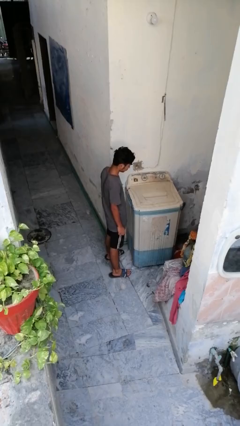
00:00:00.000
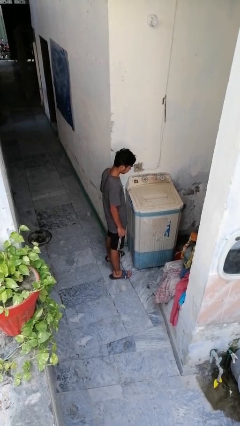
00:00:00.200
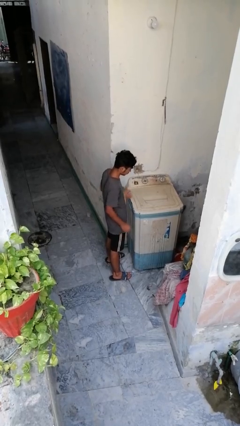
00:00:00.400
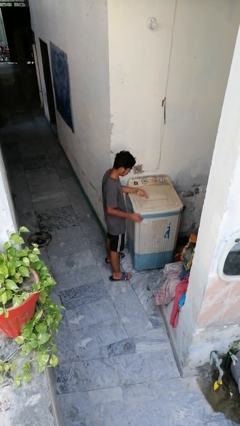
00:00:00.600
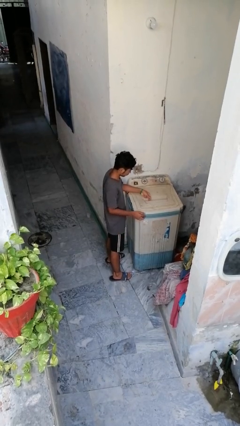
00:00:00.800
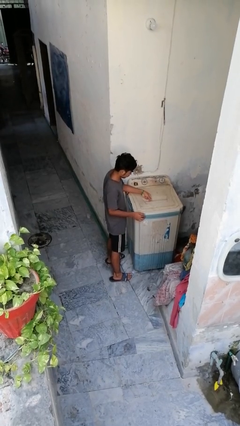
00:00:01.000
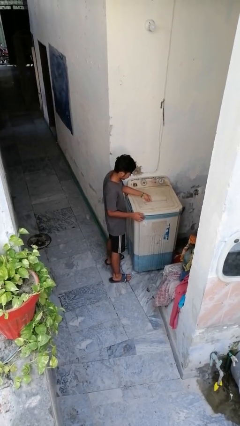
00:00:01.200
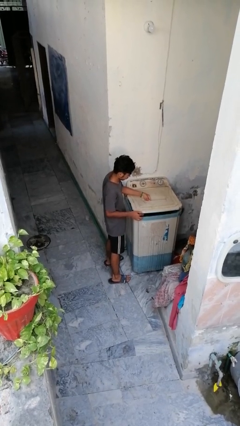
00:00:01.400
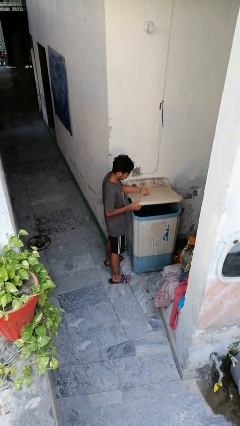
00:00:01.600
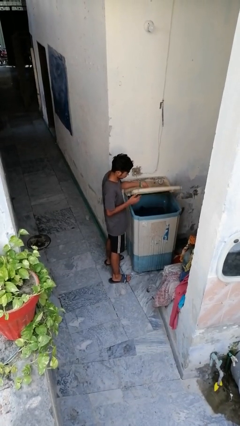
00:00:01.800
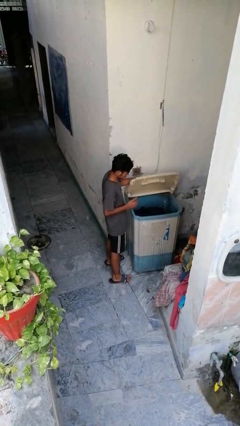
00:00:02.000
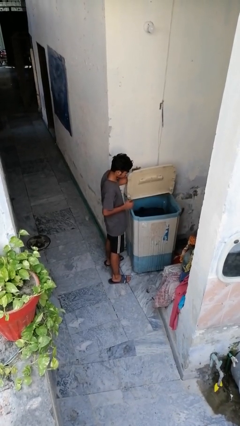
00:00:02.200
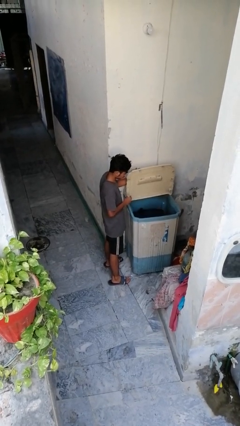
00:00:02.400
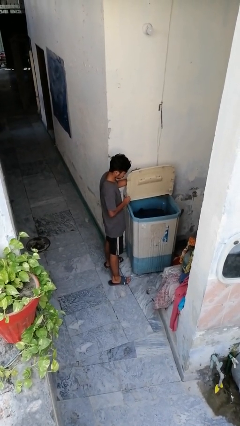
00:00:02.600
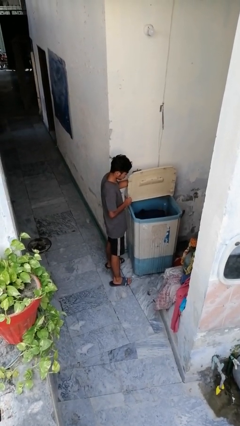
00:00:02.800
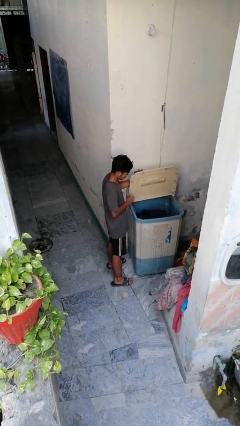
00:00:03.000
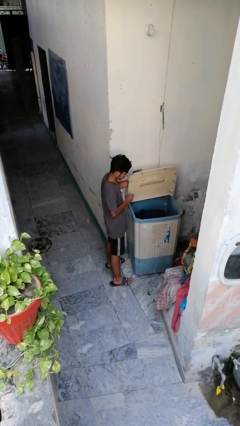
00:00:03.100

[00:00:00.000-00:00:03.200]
person opens clothes washer

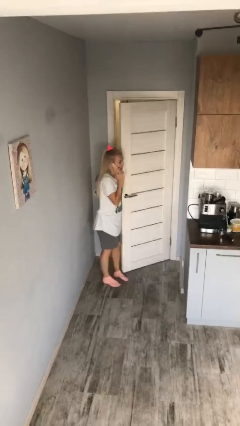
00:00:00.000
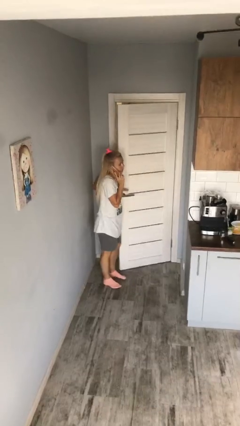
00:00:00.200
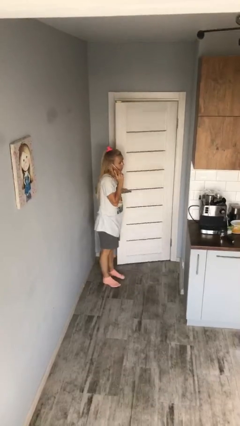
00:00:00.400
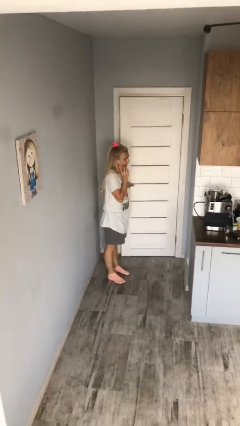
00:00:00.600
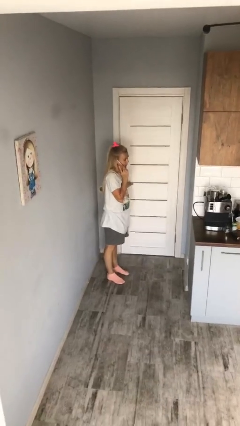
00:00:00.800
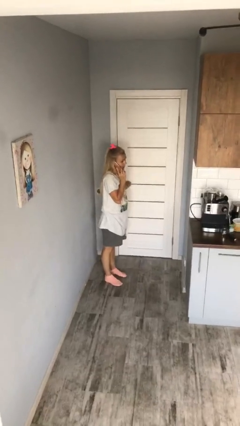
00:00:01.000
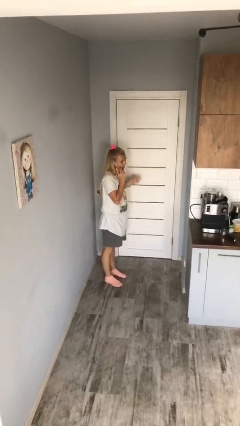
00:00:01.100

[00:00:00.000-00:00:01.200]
person closes facility door

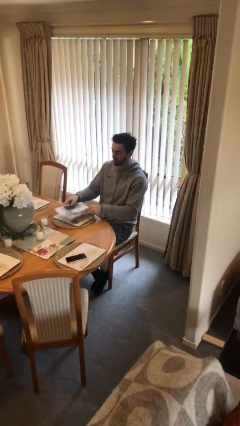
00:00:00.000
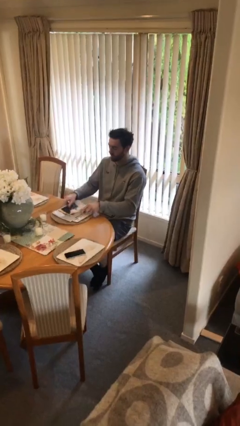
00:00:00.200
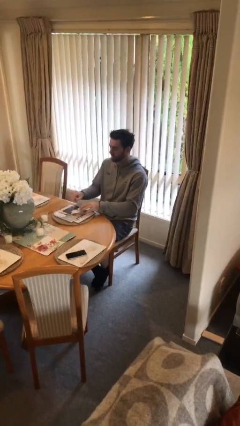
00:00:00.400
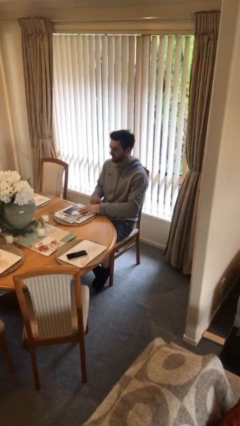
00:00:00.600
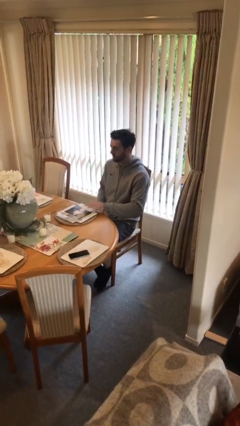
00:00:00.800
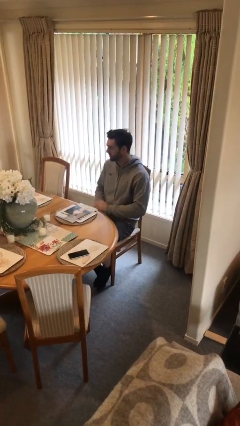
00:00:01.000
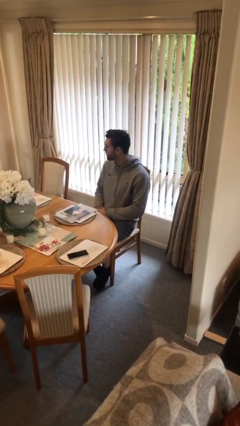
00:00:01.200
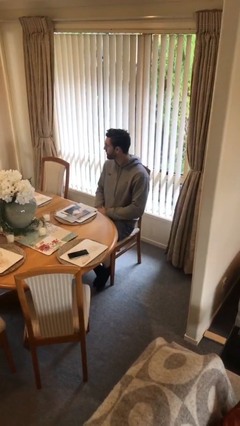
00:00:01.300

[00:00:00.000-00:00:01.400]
person puts down object on table

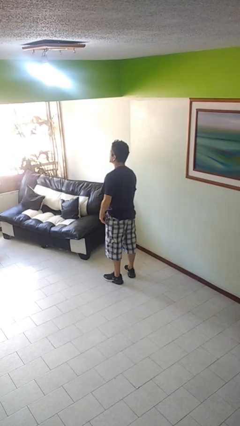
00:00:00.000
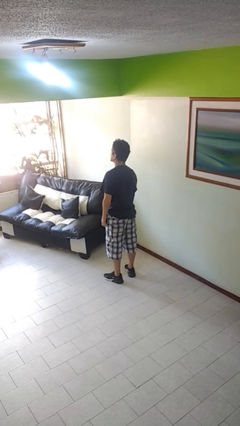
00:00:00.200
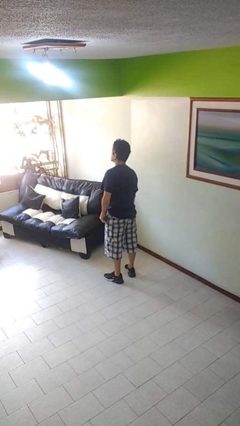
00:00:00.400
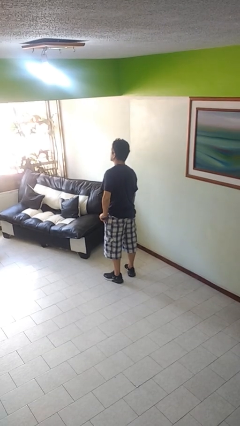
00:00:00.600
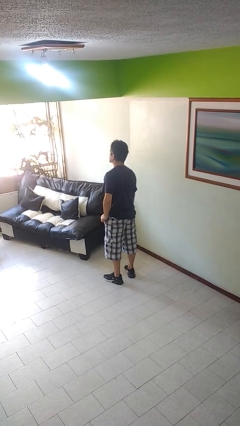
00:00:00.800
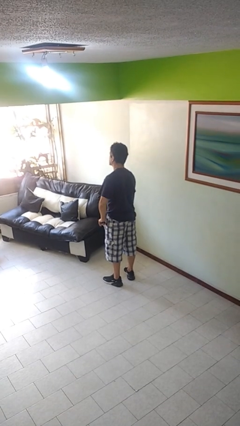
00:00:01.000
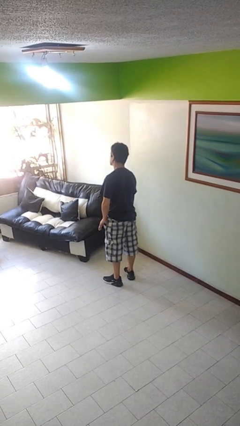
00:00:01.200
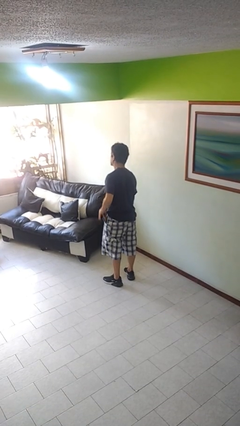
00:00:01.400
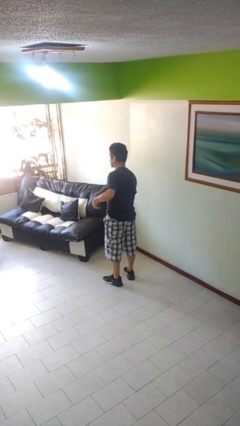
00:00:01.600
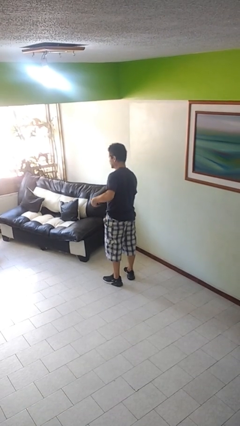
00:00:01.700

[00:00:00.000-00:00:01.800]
person takes phone from pocket

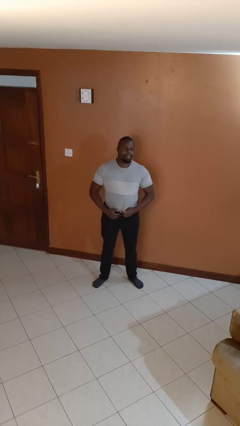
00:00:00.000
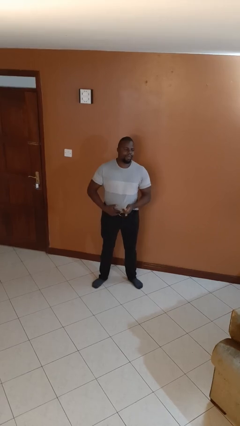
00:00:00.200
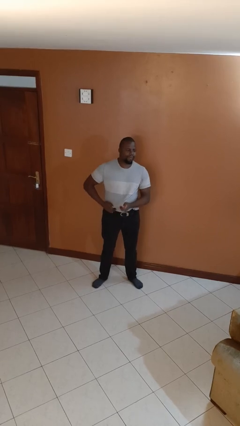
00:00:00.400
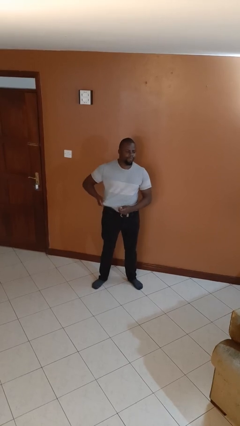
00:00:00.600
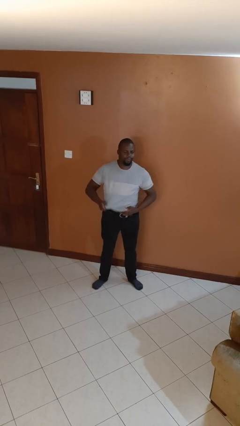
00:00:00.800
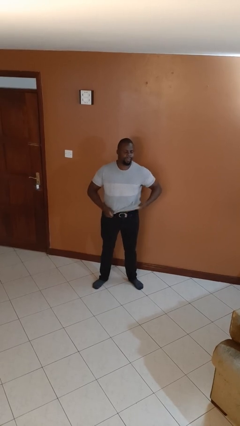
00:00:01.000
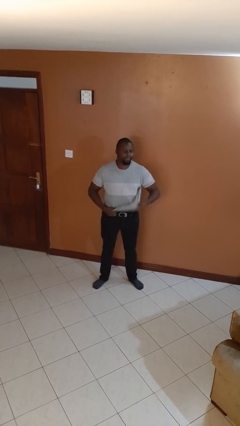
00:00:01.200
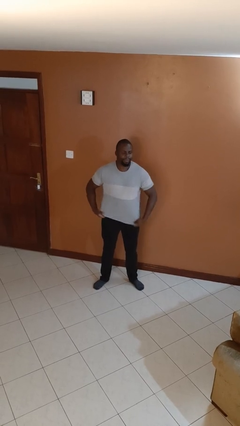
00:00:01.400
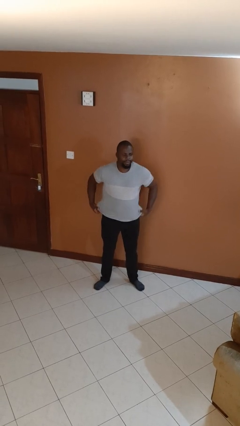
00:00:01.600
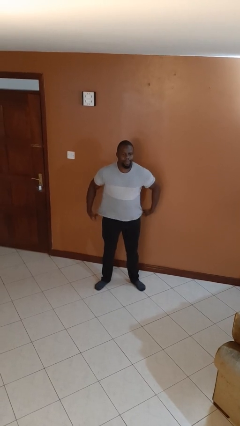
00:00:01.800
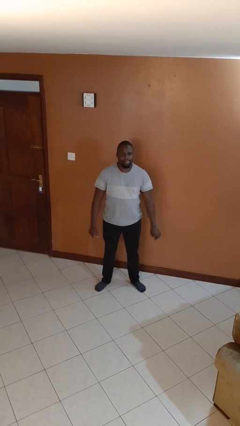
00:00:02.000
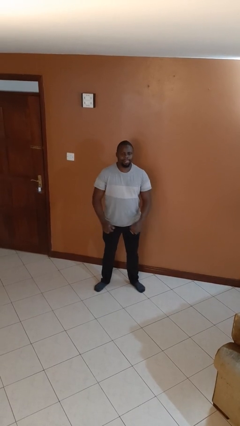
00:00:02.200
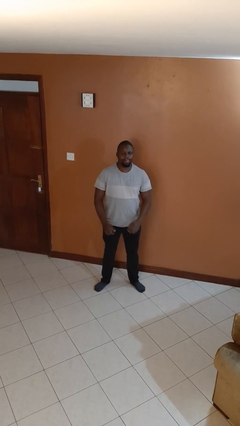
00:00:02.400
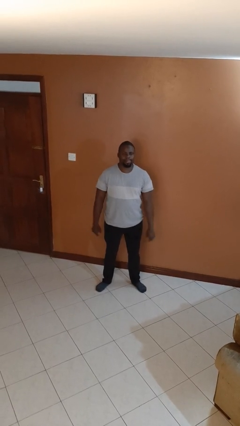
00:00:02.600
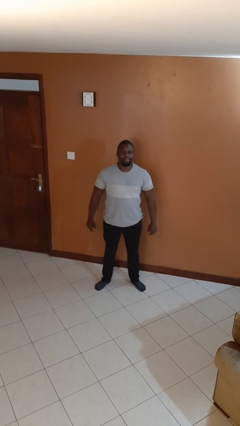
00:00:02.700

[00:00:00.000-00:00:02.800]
person untucks shirt

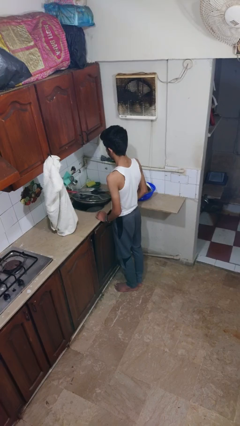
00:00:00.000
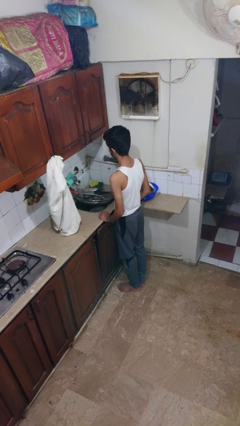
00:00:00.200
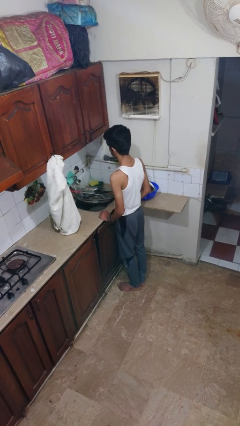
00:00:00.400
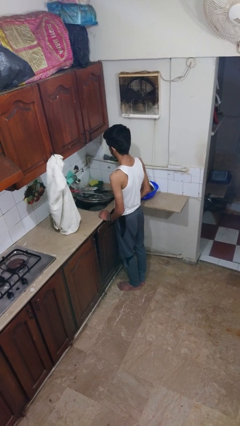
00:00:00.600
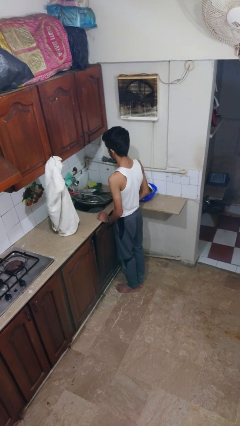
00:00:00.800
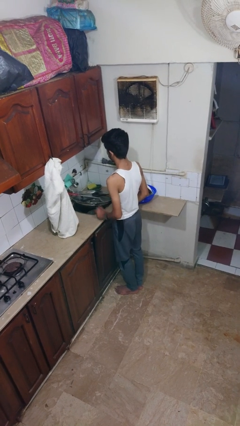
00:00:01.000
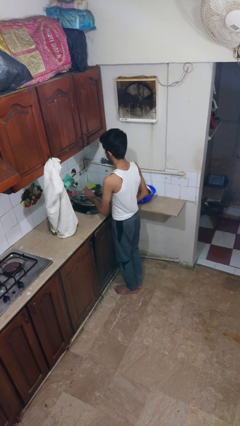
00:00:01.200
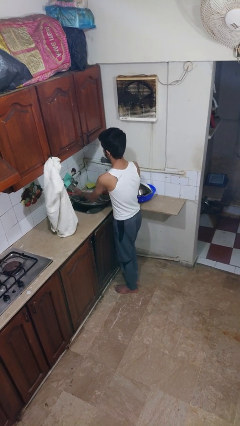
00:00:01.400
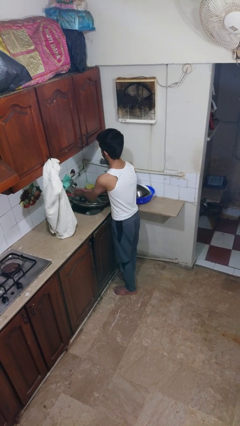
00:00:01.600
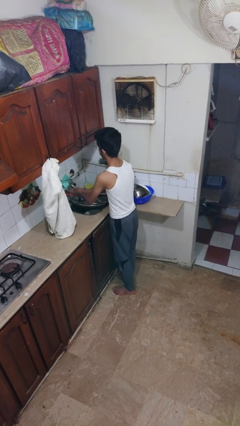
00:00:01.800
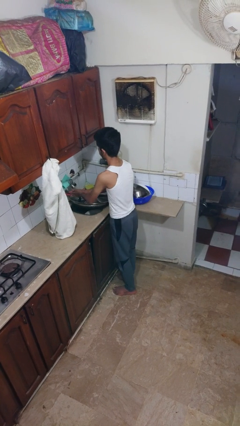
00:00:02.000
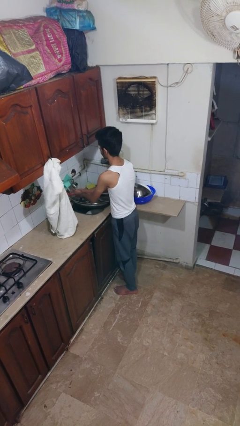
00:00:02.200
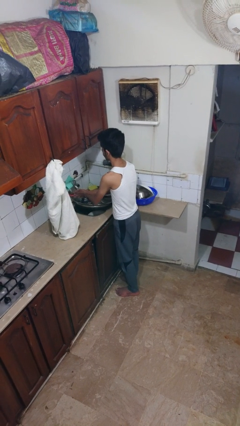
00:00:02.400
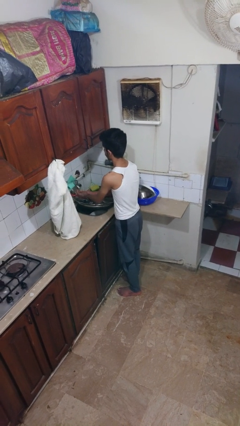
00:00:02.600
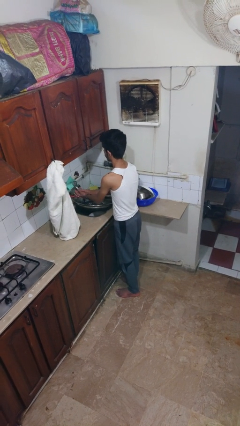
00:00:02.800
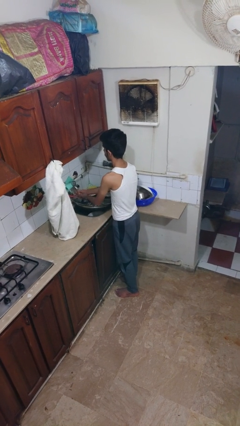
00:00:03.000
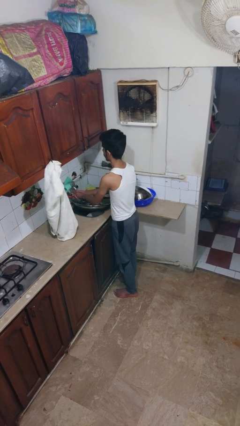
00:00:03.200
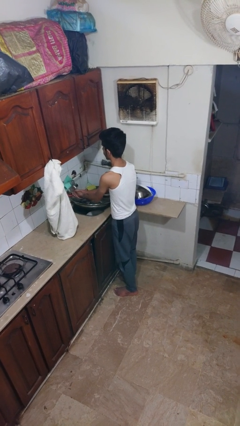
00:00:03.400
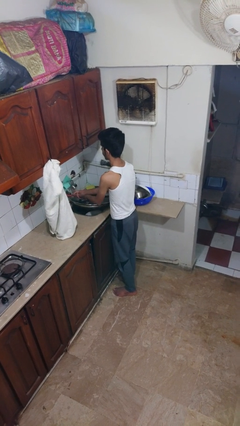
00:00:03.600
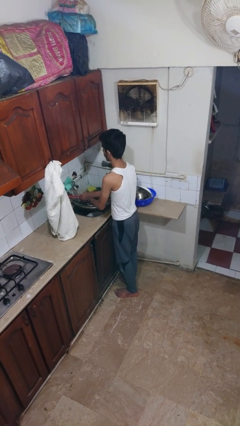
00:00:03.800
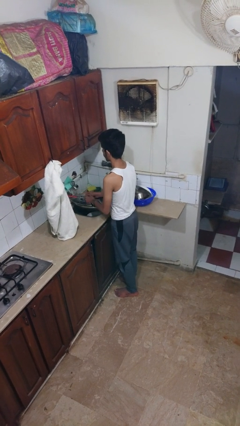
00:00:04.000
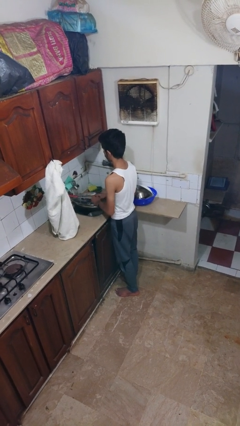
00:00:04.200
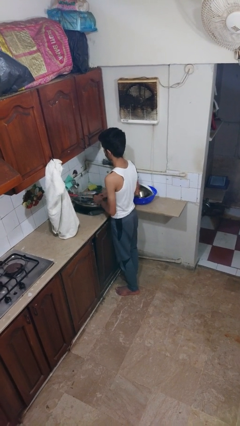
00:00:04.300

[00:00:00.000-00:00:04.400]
person washes hands

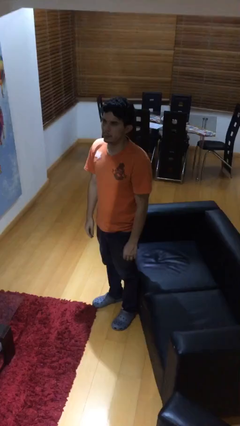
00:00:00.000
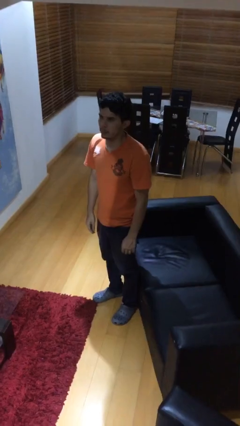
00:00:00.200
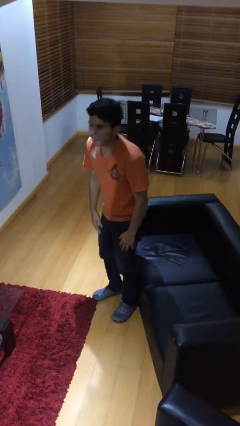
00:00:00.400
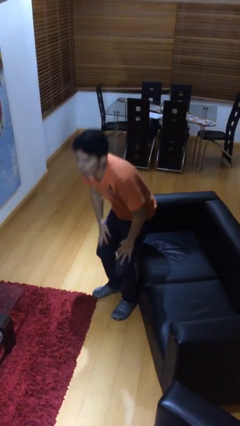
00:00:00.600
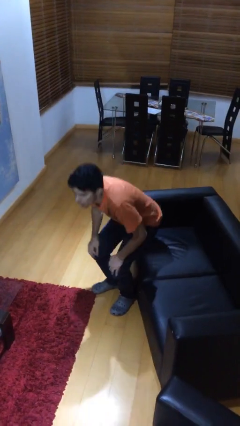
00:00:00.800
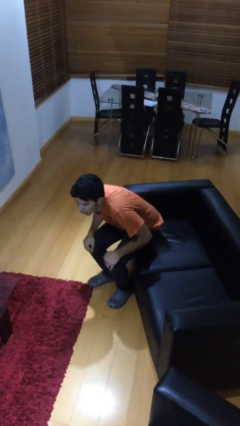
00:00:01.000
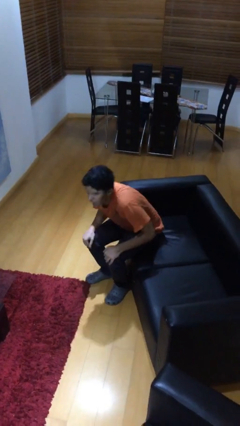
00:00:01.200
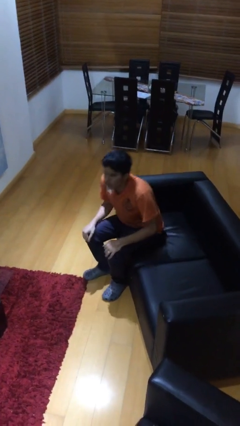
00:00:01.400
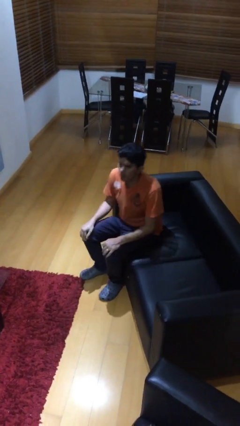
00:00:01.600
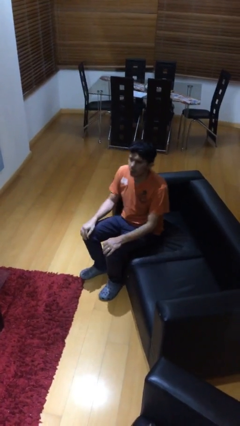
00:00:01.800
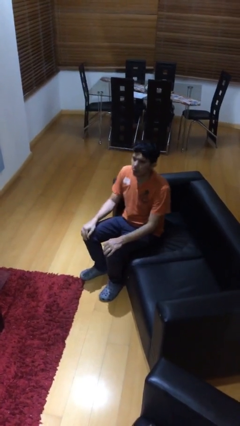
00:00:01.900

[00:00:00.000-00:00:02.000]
person sits down
